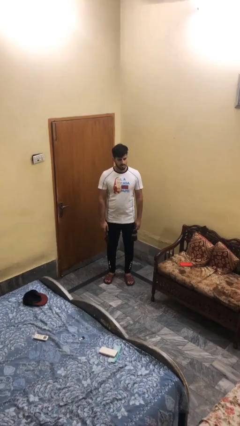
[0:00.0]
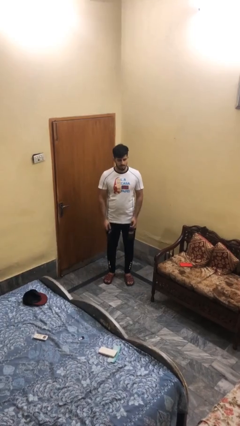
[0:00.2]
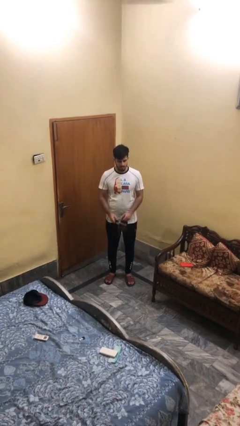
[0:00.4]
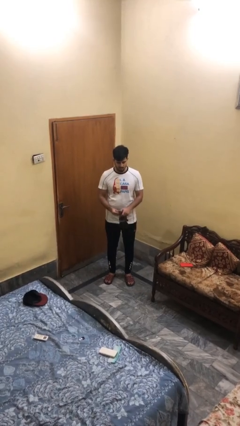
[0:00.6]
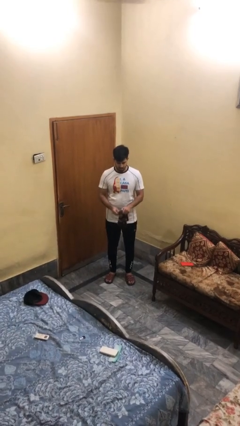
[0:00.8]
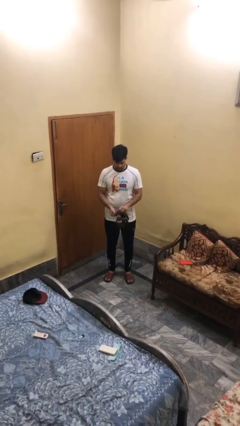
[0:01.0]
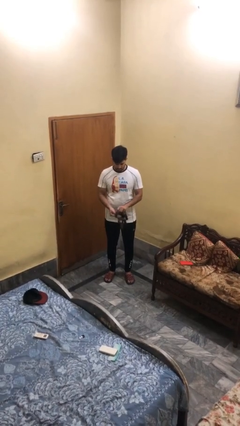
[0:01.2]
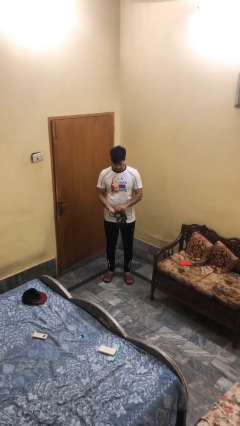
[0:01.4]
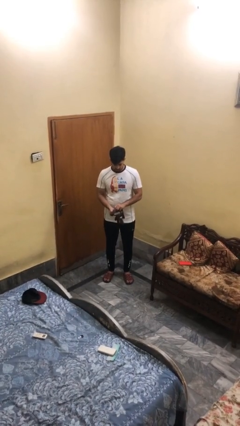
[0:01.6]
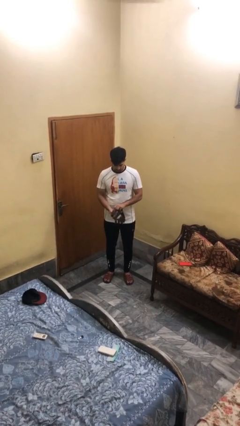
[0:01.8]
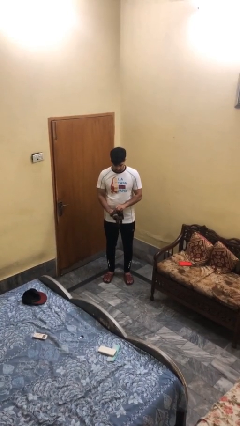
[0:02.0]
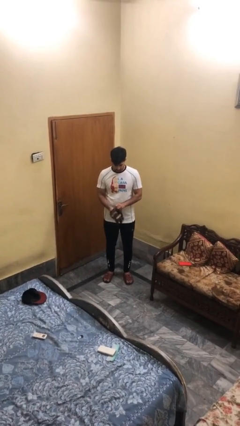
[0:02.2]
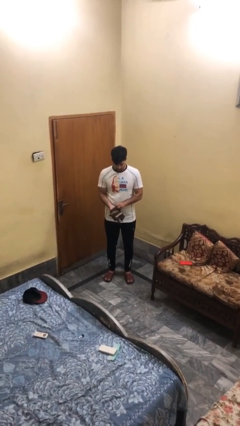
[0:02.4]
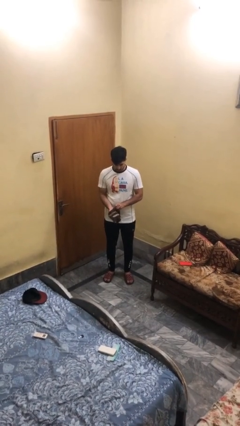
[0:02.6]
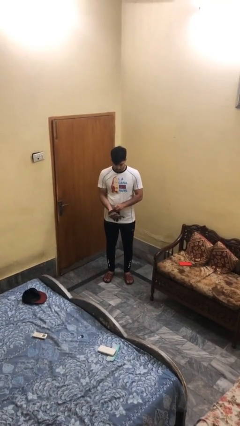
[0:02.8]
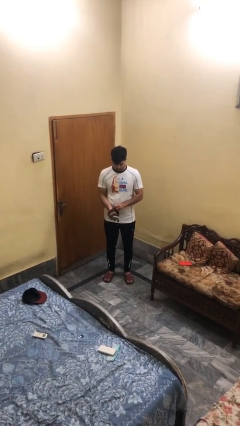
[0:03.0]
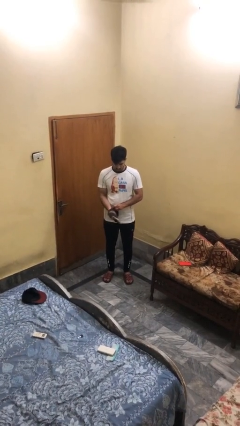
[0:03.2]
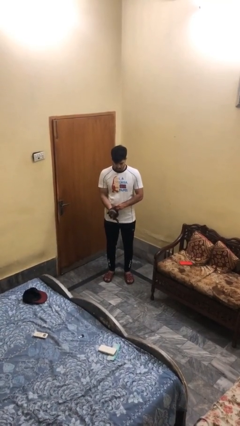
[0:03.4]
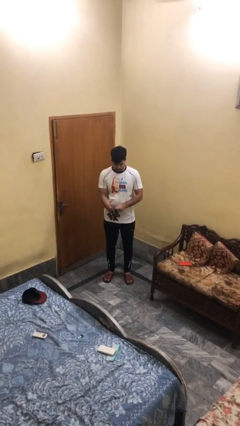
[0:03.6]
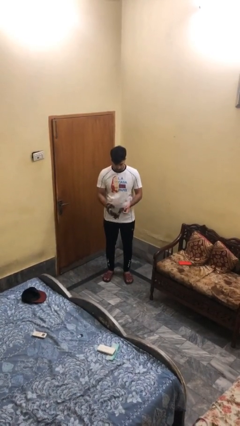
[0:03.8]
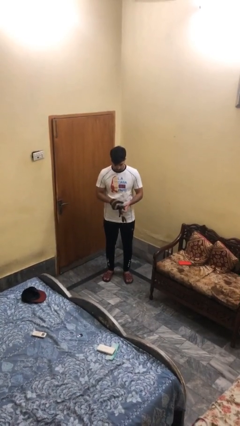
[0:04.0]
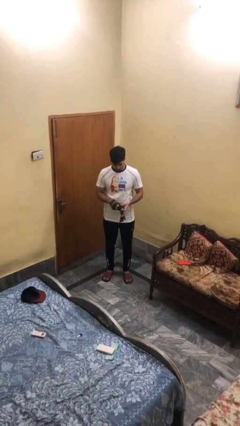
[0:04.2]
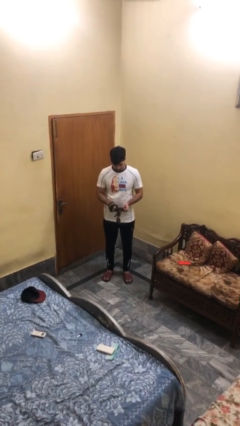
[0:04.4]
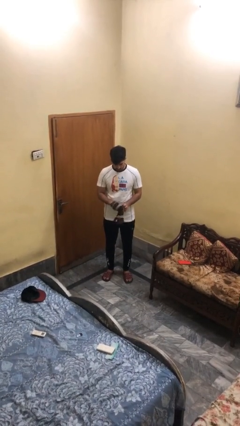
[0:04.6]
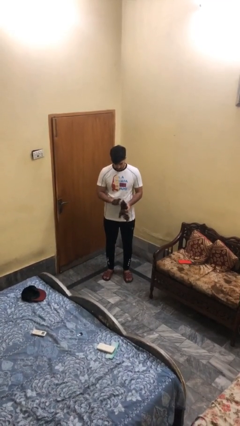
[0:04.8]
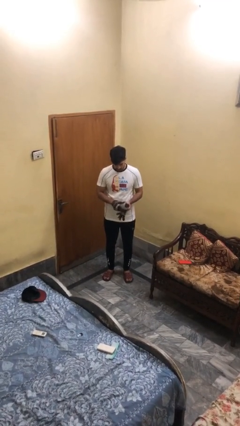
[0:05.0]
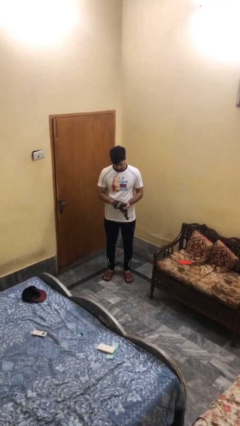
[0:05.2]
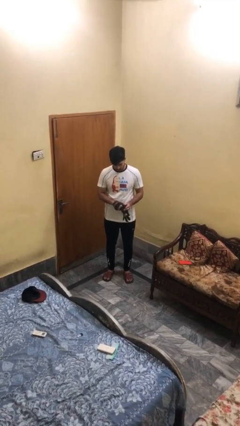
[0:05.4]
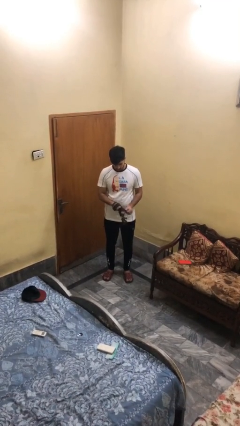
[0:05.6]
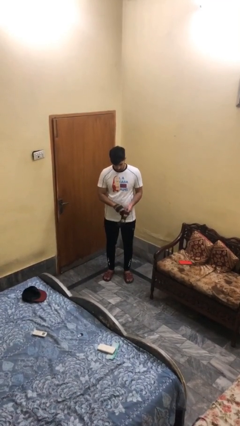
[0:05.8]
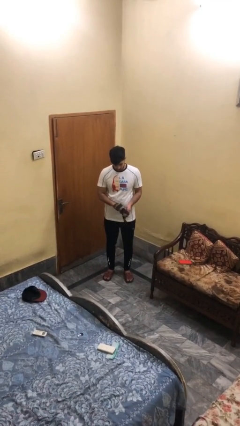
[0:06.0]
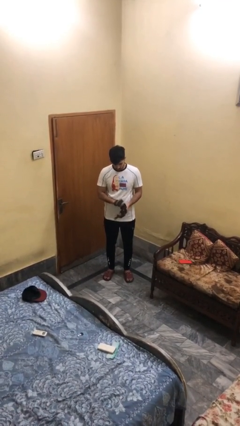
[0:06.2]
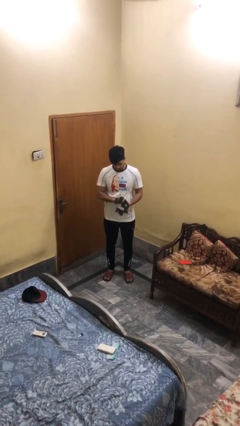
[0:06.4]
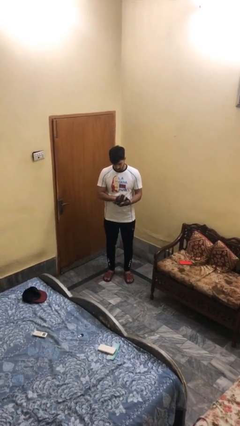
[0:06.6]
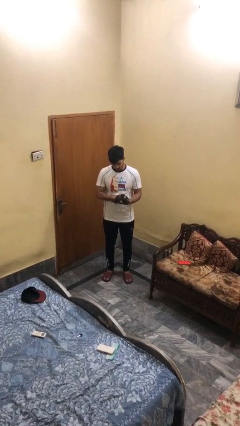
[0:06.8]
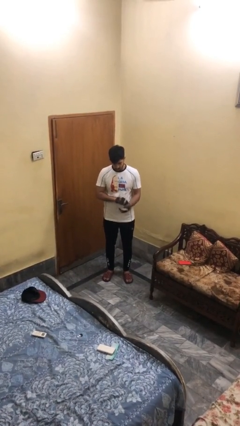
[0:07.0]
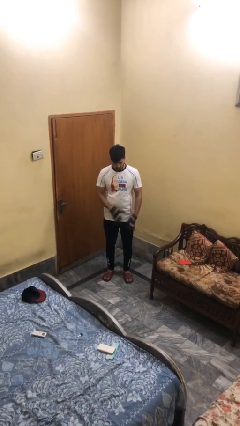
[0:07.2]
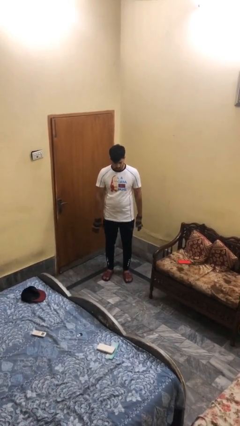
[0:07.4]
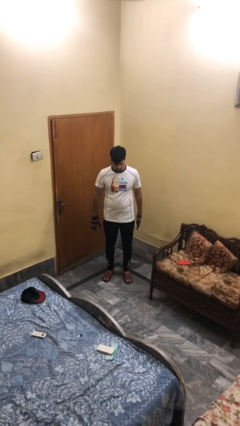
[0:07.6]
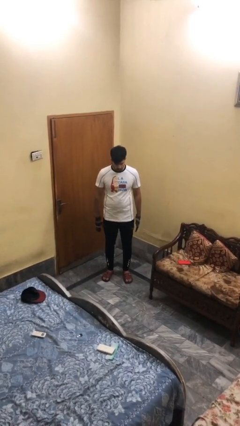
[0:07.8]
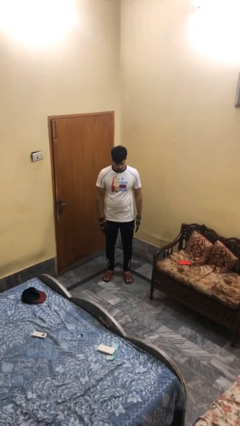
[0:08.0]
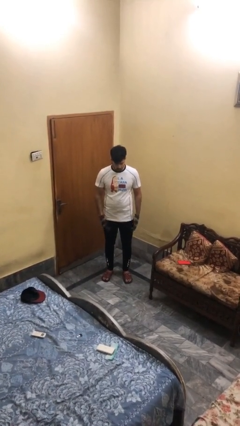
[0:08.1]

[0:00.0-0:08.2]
person puts on gloves

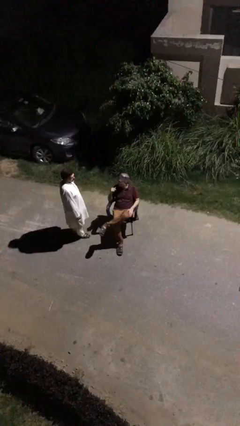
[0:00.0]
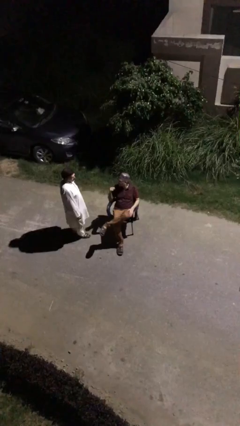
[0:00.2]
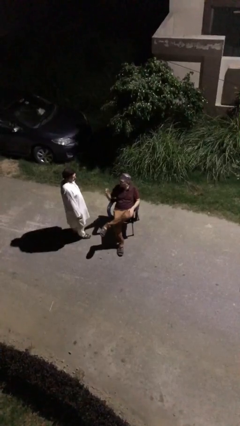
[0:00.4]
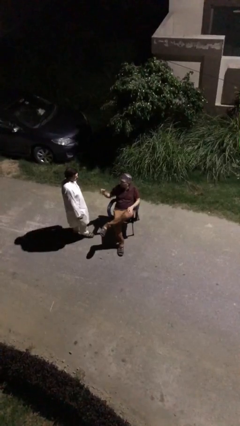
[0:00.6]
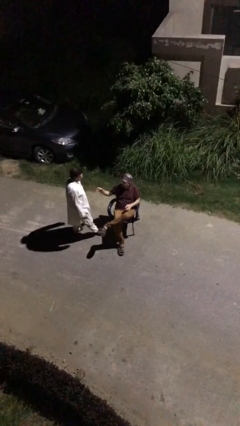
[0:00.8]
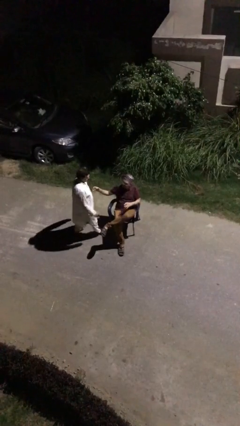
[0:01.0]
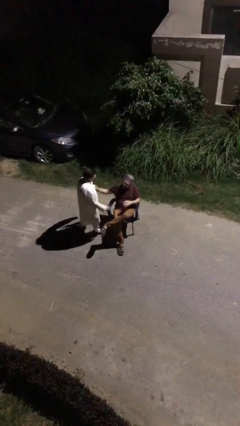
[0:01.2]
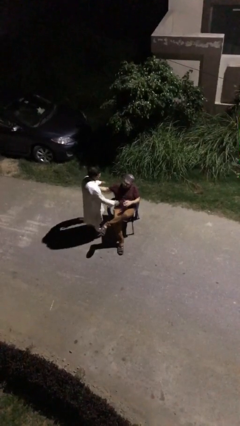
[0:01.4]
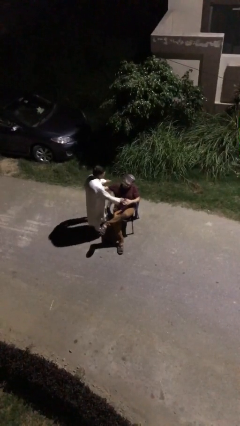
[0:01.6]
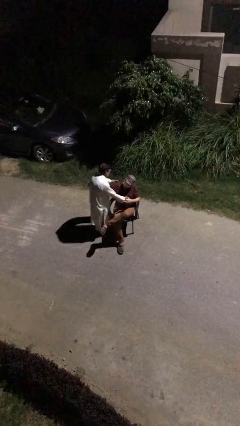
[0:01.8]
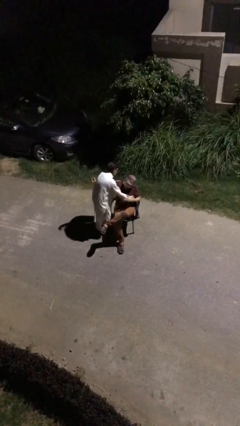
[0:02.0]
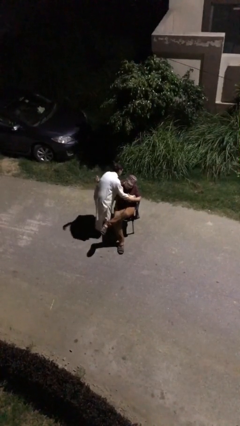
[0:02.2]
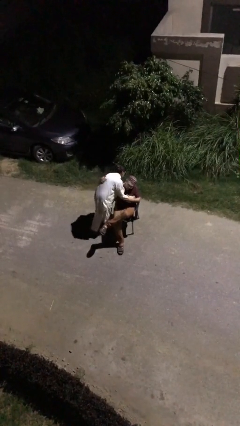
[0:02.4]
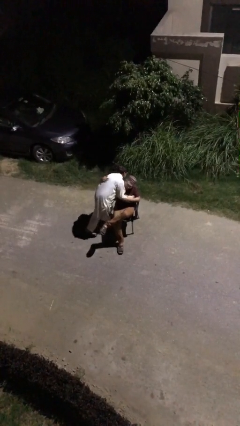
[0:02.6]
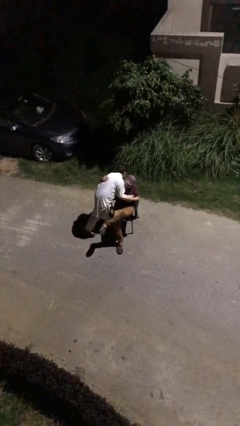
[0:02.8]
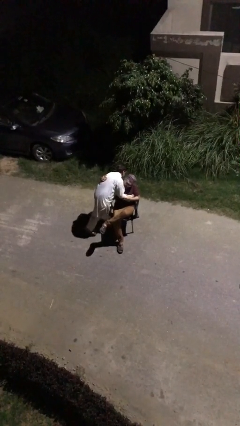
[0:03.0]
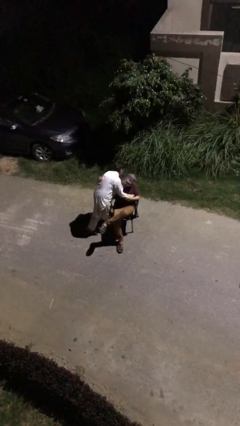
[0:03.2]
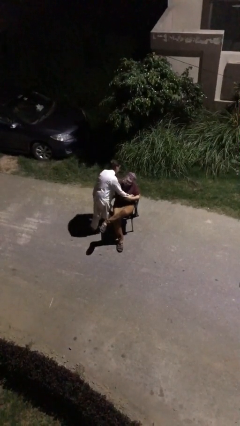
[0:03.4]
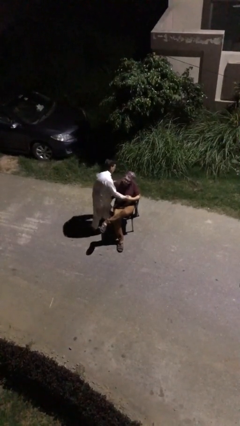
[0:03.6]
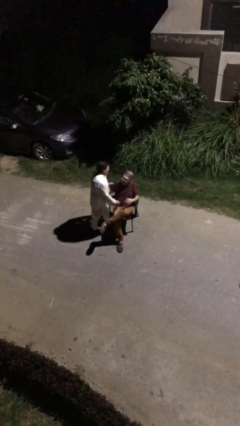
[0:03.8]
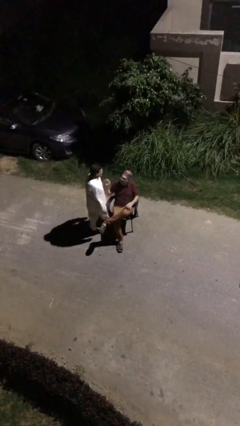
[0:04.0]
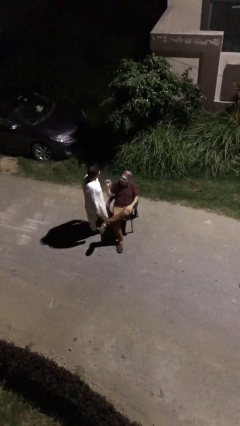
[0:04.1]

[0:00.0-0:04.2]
person embraces person

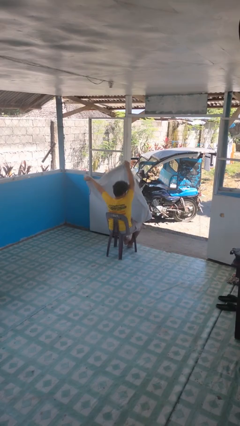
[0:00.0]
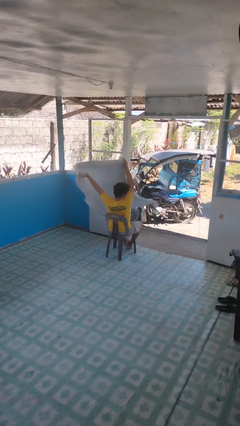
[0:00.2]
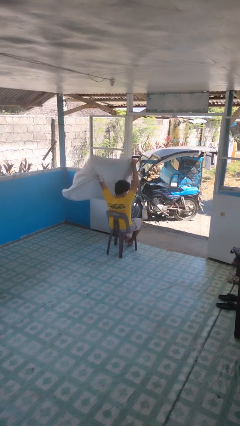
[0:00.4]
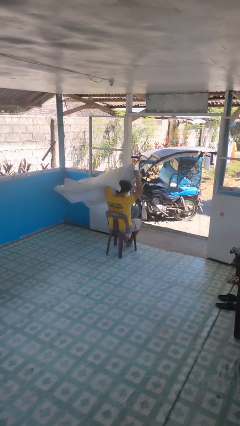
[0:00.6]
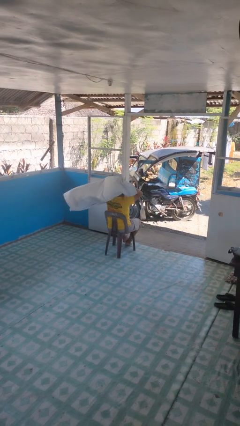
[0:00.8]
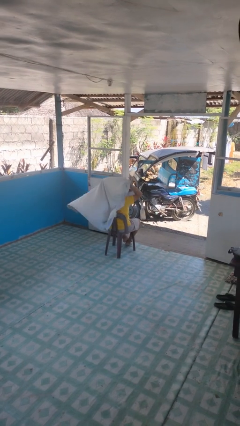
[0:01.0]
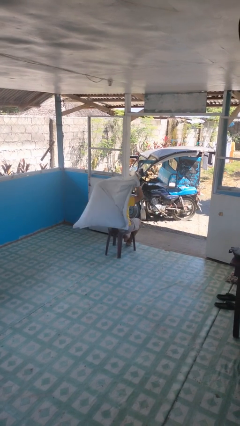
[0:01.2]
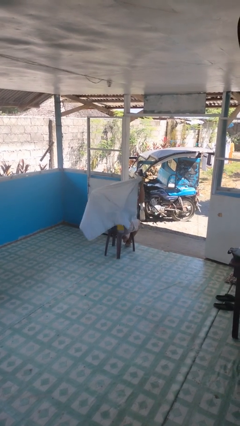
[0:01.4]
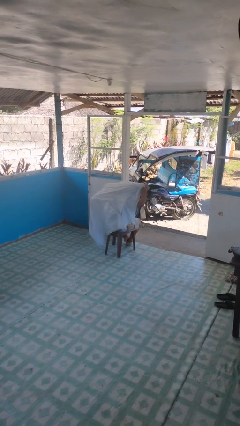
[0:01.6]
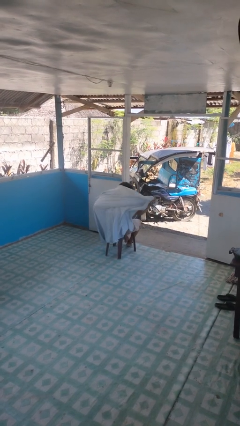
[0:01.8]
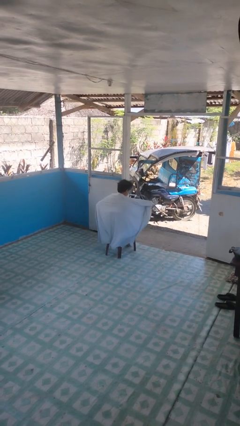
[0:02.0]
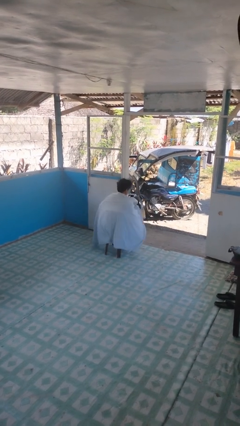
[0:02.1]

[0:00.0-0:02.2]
person covers with blanket

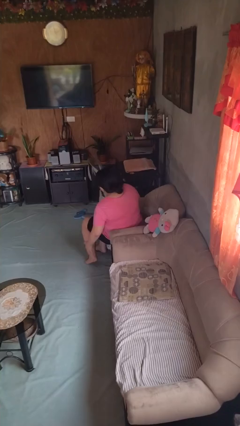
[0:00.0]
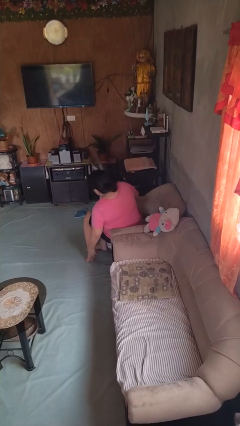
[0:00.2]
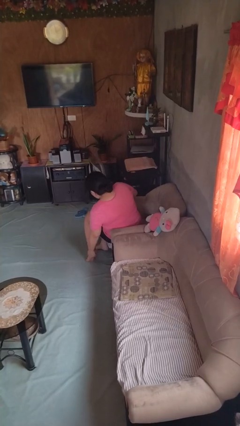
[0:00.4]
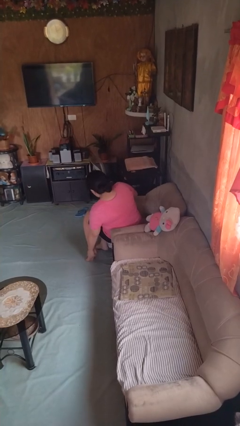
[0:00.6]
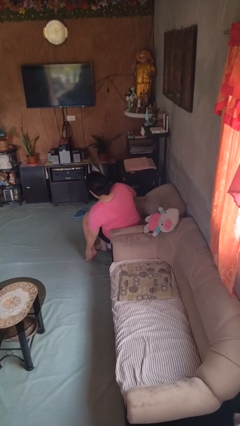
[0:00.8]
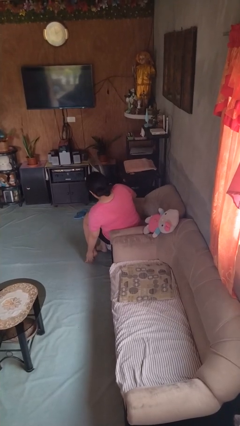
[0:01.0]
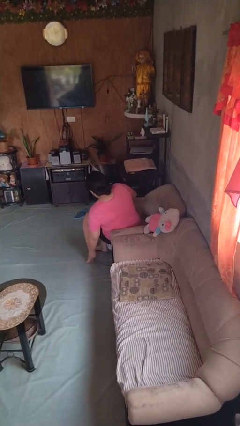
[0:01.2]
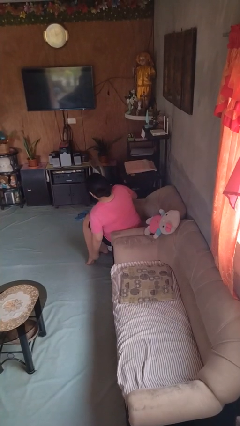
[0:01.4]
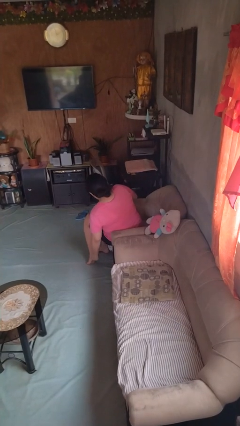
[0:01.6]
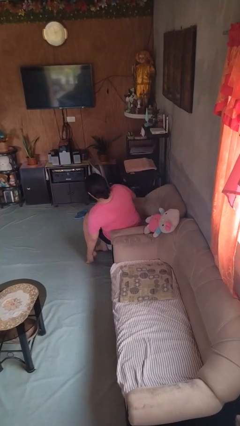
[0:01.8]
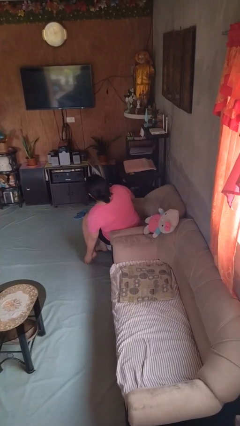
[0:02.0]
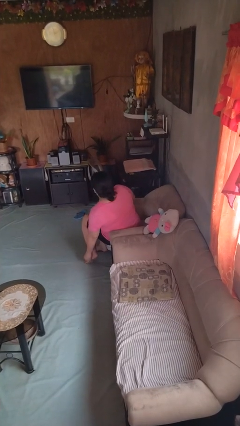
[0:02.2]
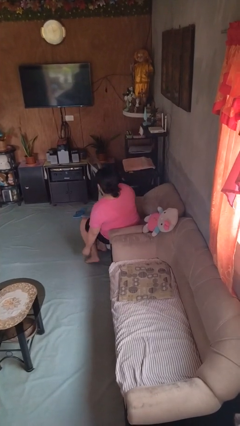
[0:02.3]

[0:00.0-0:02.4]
person rubs foot

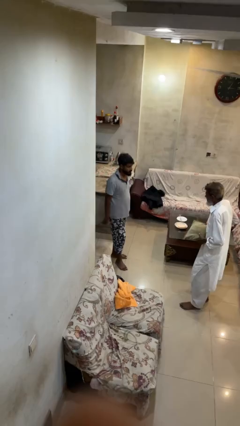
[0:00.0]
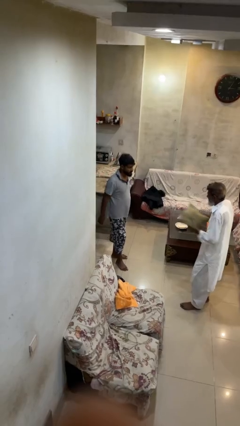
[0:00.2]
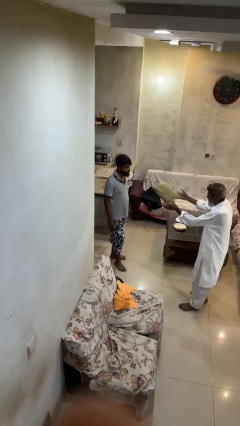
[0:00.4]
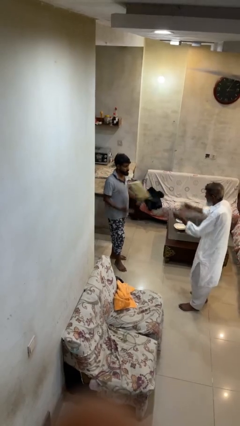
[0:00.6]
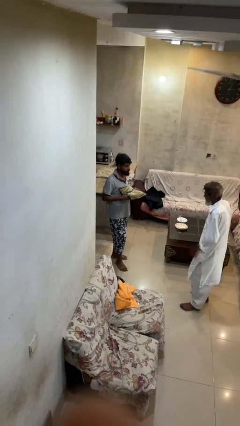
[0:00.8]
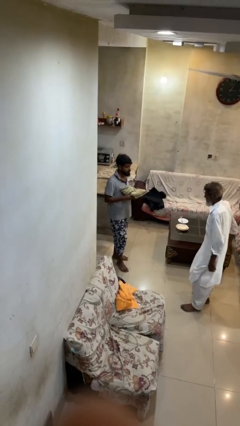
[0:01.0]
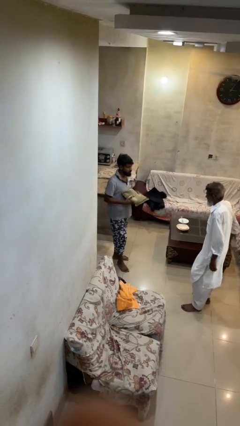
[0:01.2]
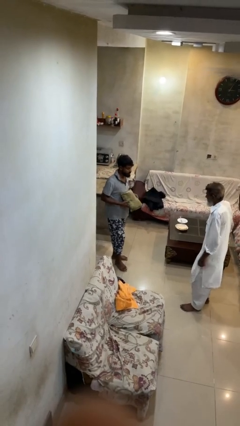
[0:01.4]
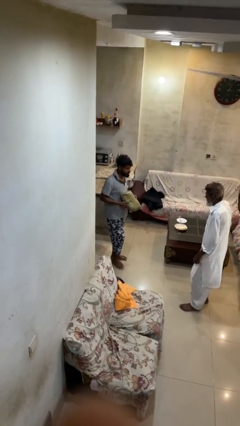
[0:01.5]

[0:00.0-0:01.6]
person catches object from person
